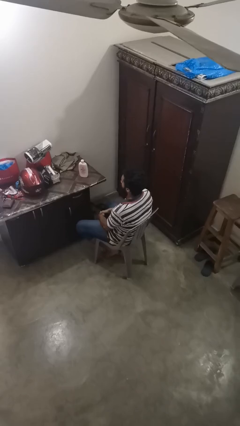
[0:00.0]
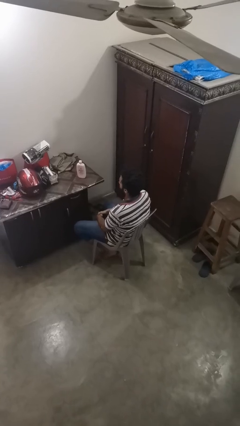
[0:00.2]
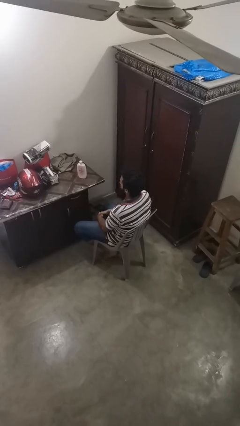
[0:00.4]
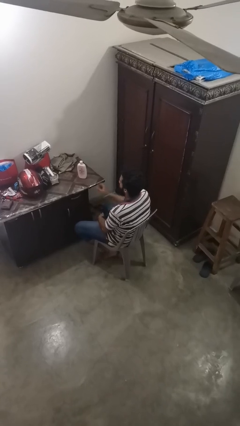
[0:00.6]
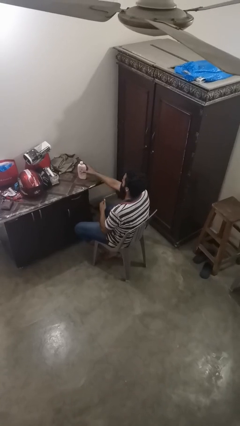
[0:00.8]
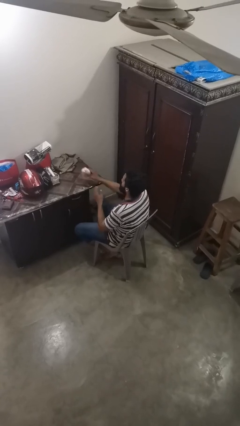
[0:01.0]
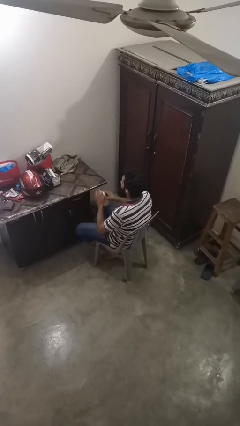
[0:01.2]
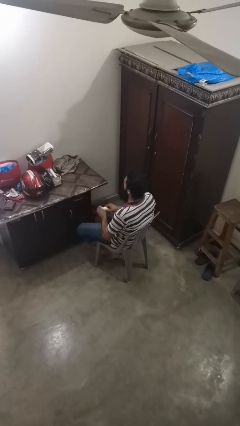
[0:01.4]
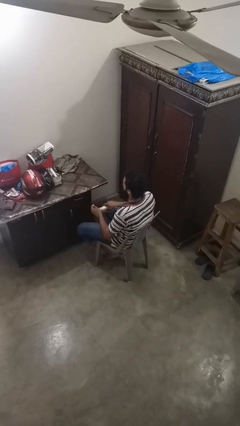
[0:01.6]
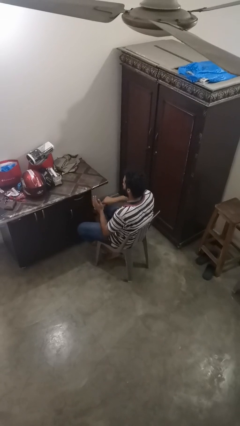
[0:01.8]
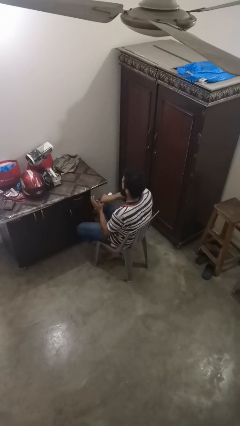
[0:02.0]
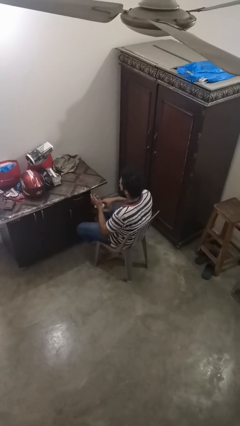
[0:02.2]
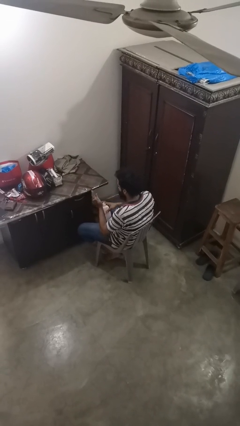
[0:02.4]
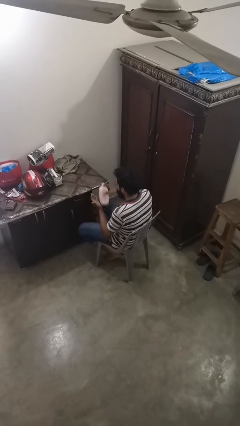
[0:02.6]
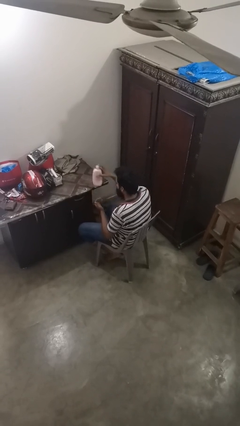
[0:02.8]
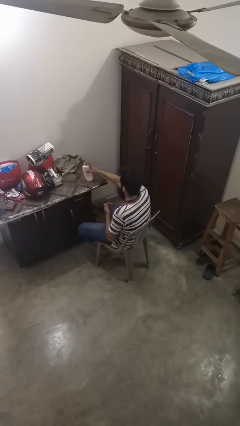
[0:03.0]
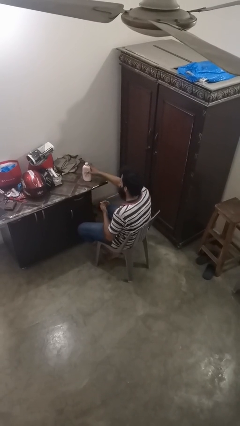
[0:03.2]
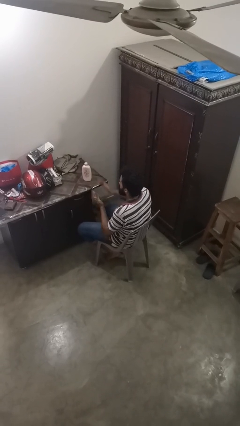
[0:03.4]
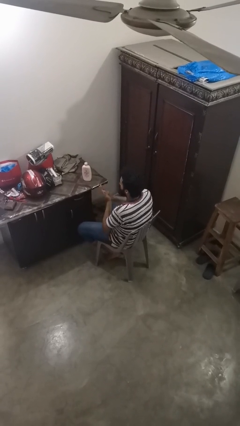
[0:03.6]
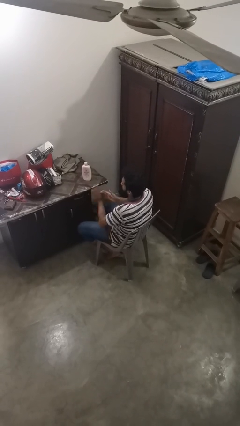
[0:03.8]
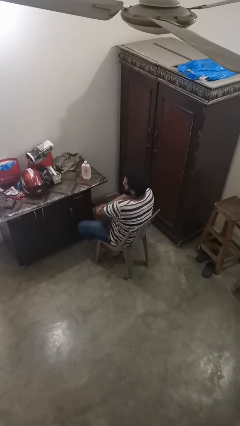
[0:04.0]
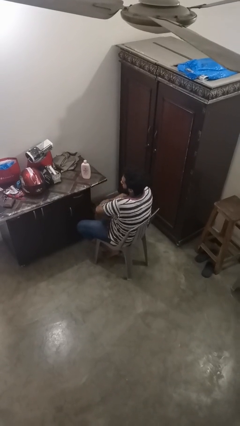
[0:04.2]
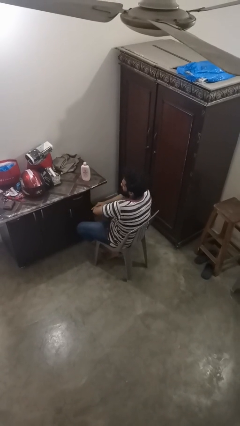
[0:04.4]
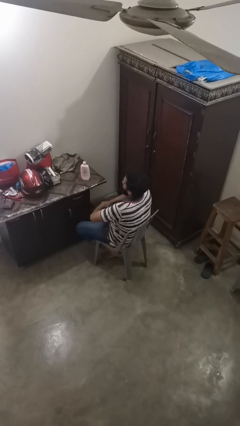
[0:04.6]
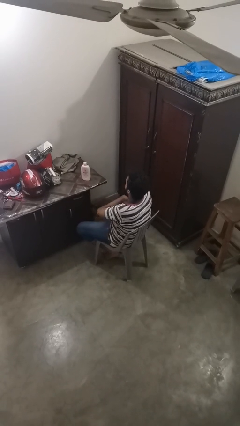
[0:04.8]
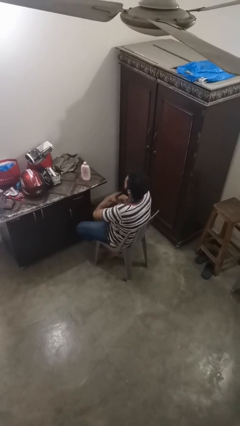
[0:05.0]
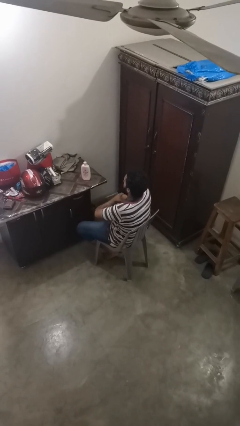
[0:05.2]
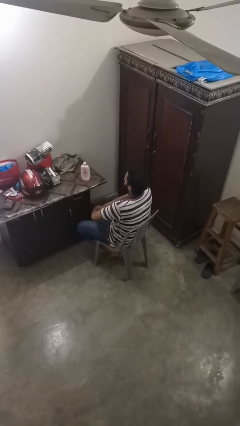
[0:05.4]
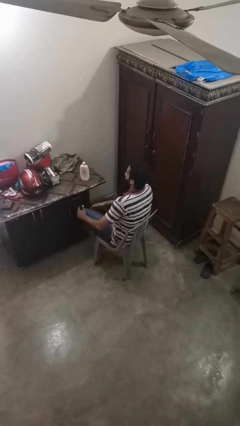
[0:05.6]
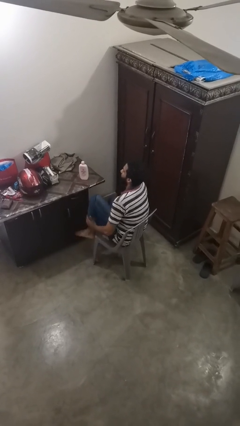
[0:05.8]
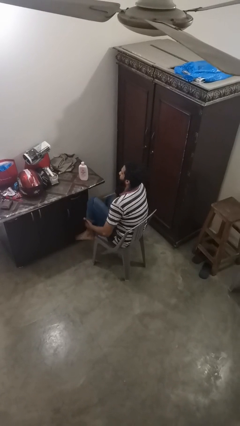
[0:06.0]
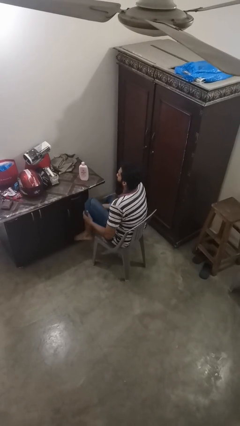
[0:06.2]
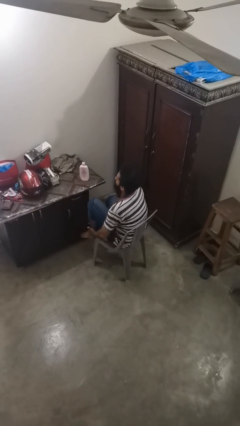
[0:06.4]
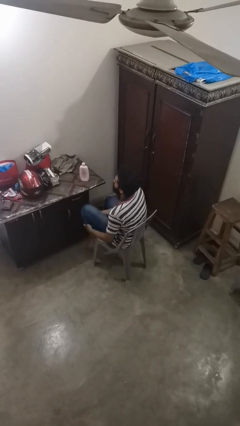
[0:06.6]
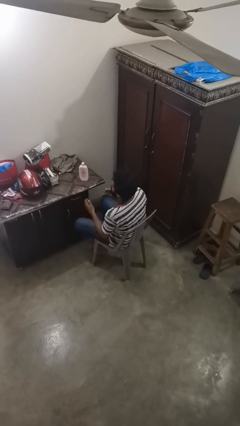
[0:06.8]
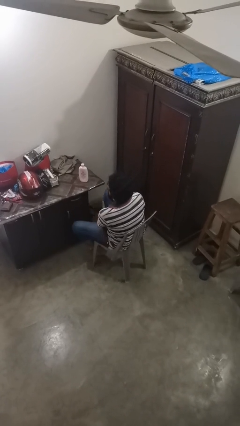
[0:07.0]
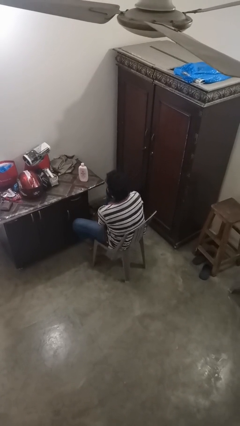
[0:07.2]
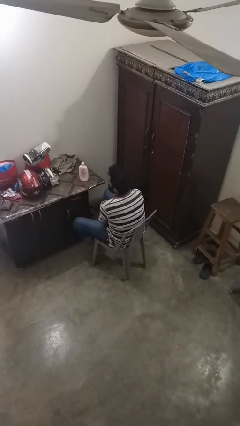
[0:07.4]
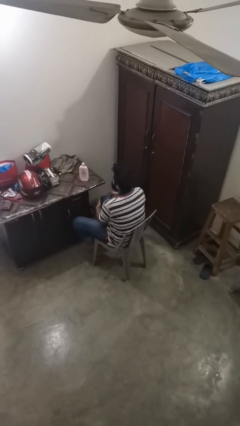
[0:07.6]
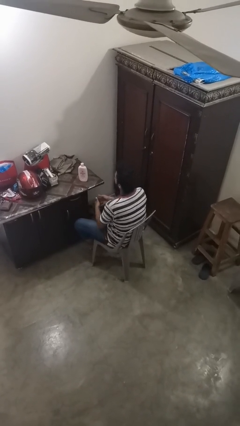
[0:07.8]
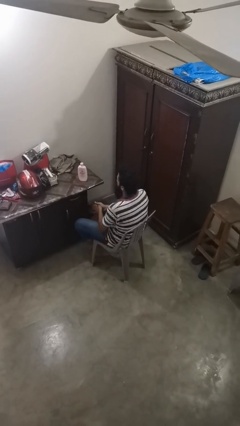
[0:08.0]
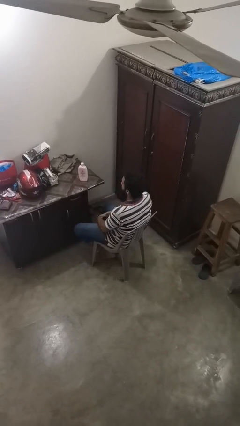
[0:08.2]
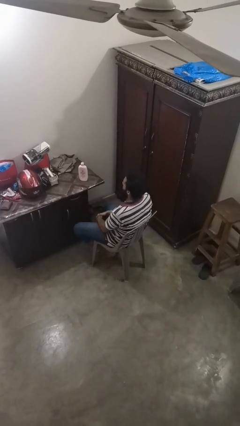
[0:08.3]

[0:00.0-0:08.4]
person applies sunscreen

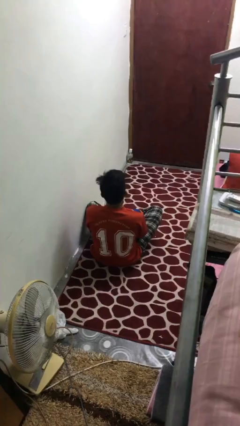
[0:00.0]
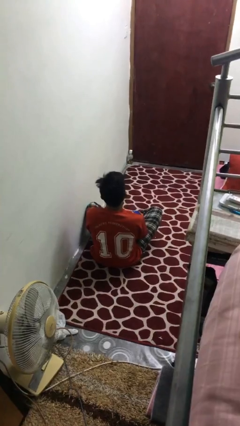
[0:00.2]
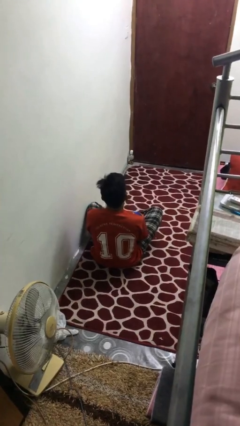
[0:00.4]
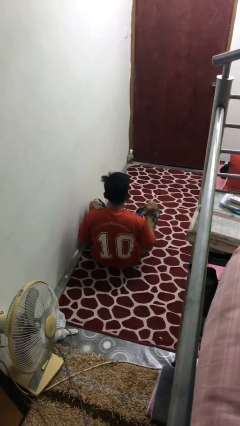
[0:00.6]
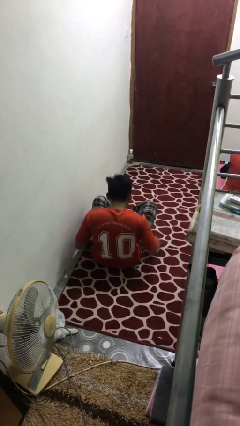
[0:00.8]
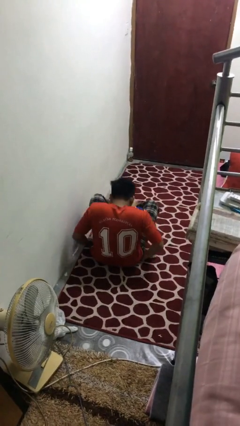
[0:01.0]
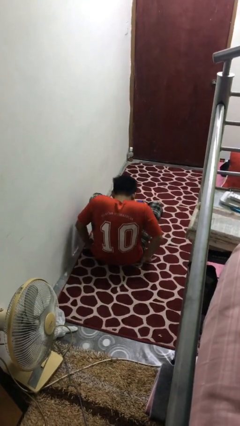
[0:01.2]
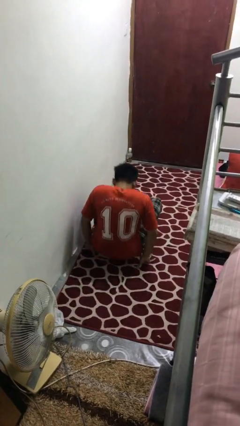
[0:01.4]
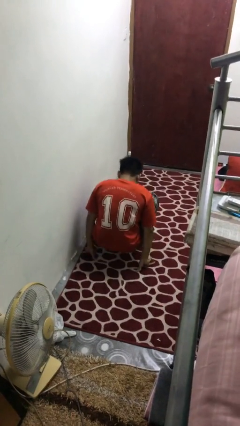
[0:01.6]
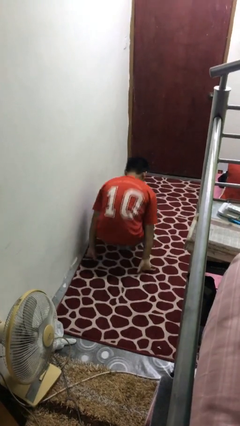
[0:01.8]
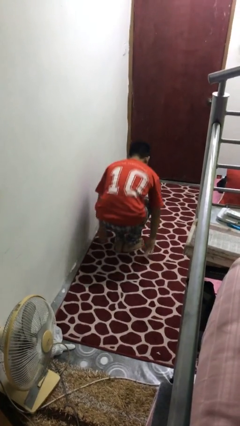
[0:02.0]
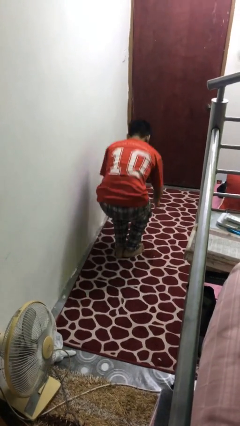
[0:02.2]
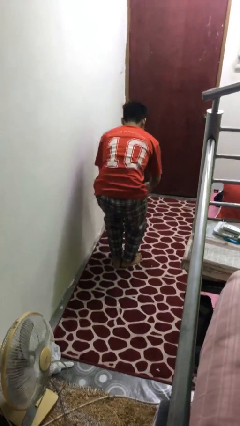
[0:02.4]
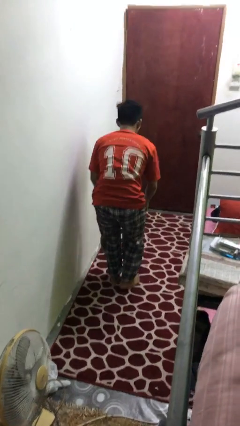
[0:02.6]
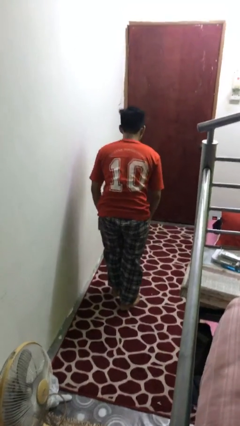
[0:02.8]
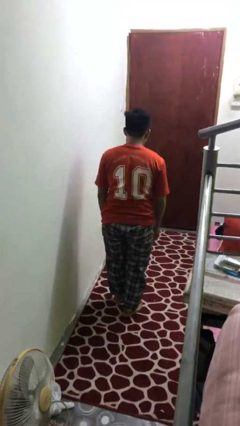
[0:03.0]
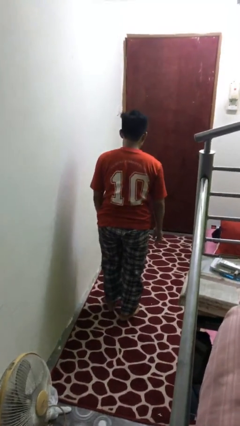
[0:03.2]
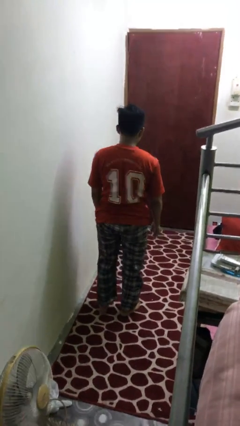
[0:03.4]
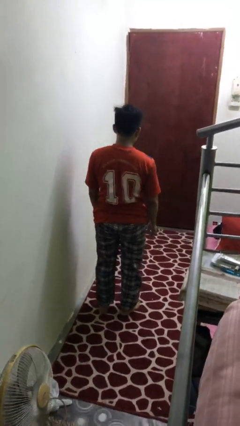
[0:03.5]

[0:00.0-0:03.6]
person stands up from floor

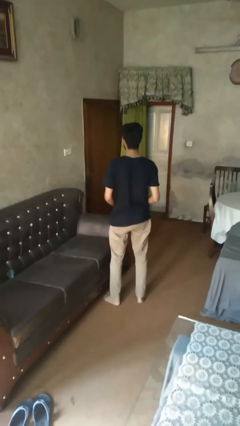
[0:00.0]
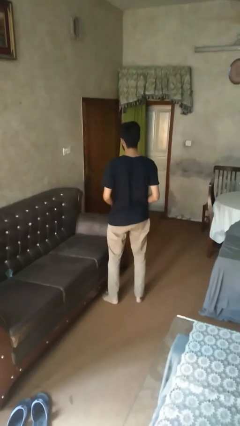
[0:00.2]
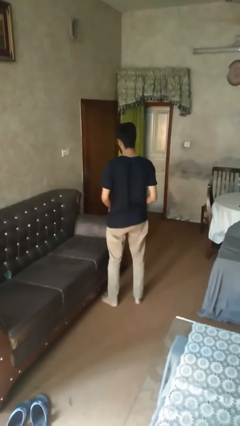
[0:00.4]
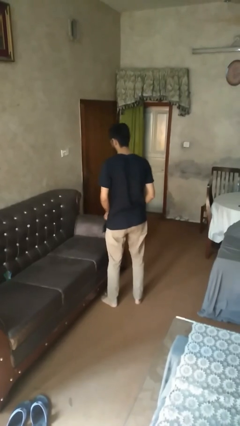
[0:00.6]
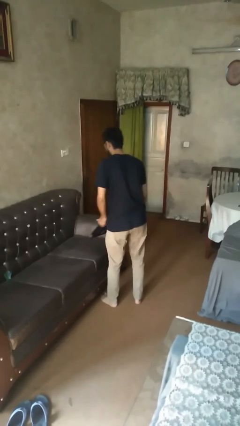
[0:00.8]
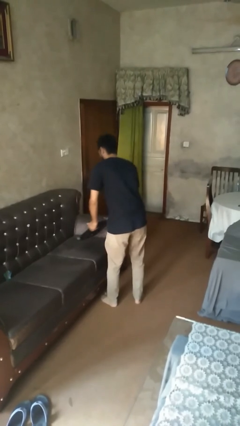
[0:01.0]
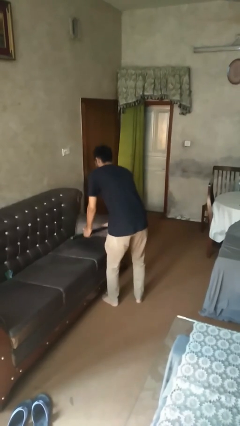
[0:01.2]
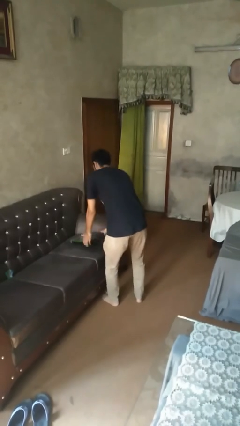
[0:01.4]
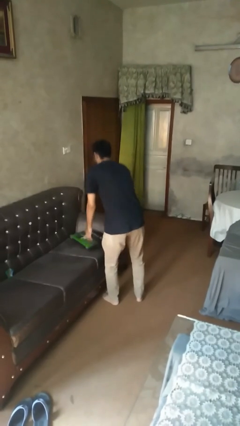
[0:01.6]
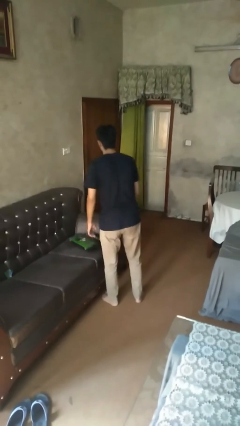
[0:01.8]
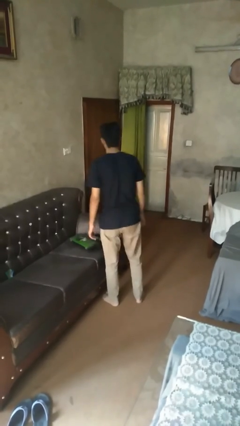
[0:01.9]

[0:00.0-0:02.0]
person puts down object on couch

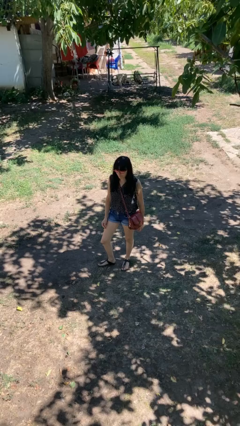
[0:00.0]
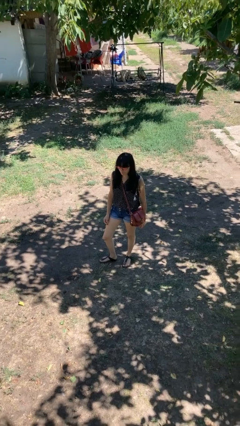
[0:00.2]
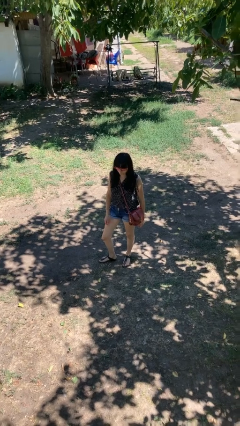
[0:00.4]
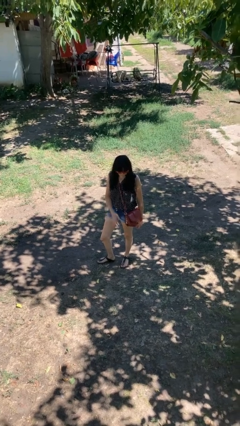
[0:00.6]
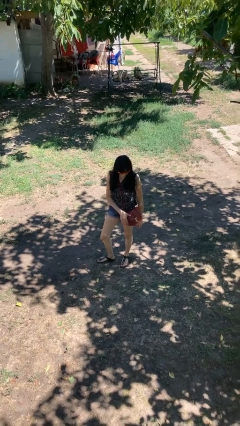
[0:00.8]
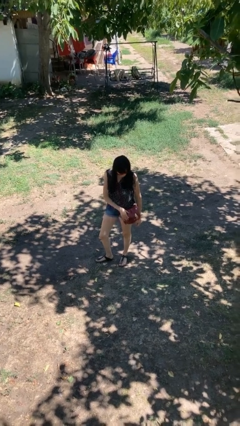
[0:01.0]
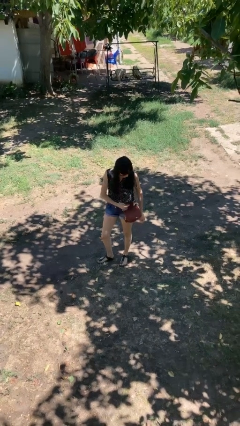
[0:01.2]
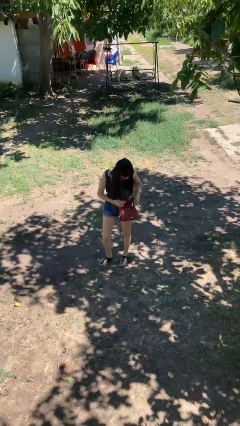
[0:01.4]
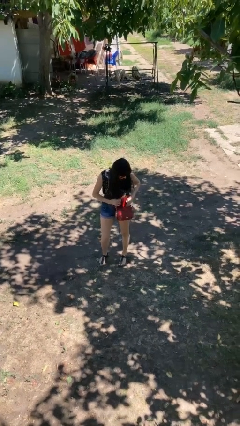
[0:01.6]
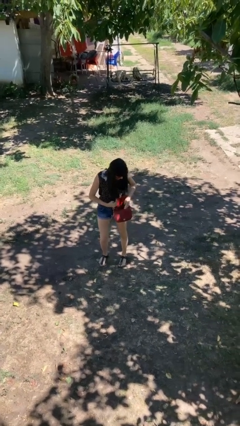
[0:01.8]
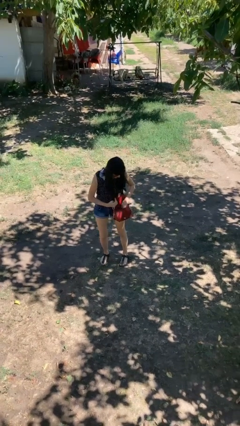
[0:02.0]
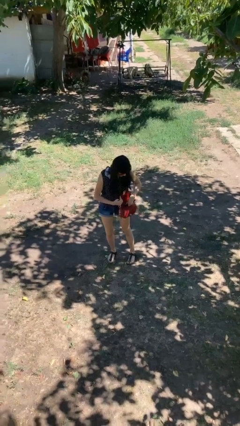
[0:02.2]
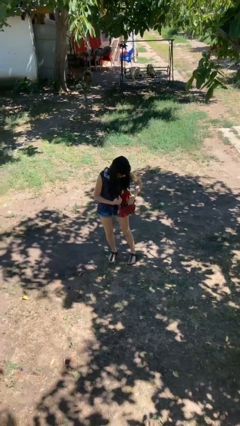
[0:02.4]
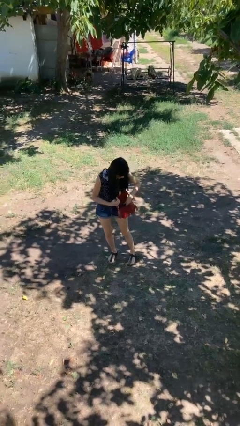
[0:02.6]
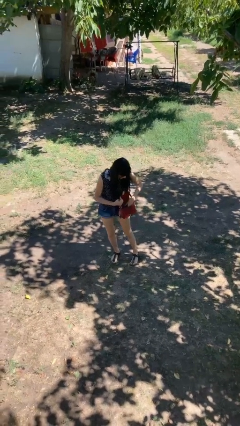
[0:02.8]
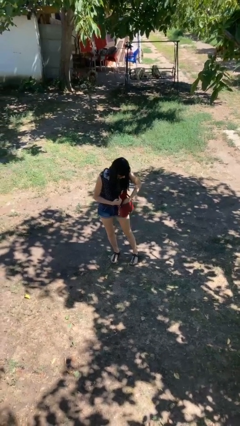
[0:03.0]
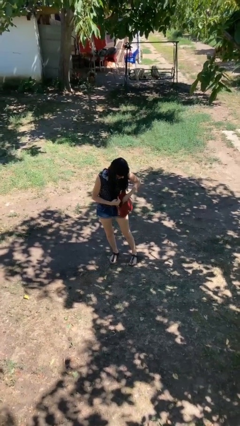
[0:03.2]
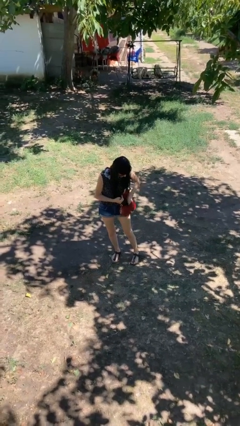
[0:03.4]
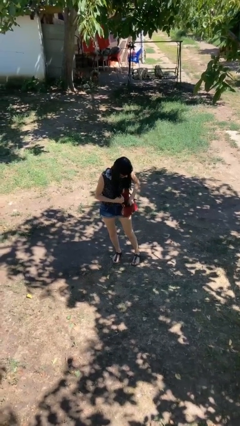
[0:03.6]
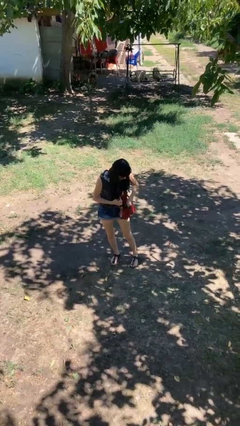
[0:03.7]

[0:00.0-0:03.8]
person searches in purse

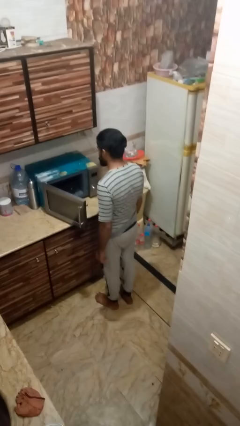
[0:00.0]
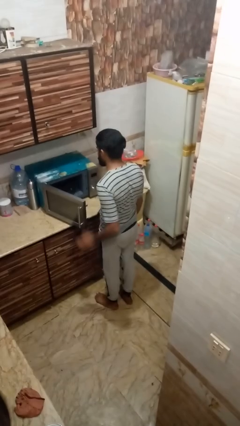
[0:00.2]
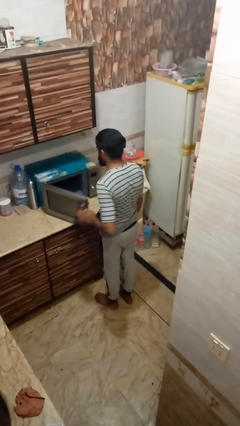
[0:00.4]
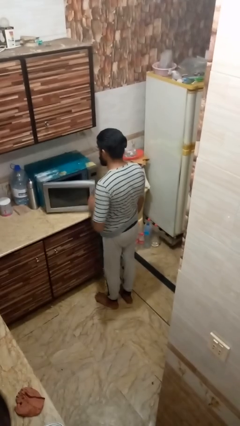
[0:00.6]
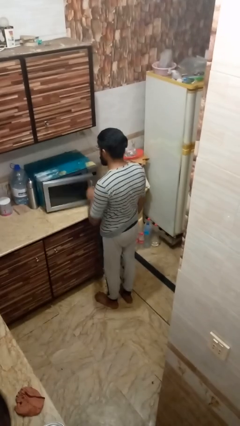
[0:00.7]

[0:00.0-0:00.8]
person closes oven door
